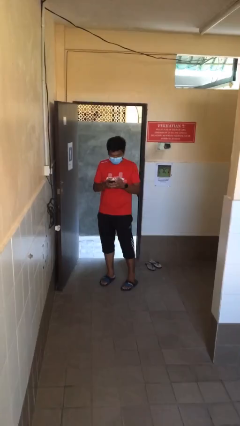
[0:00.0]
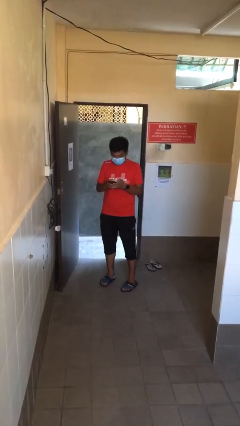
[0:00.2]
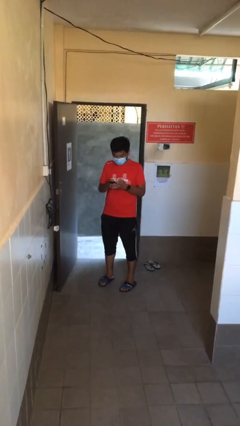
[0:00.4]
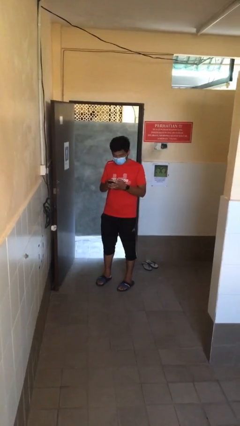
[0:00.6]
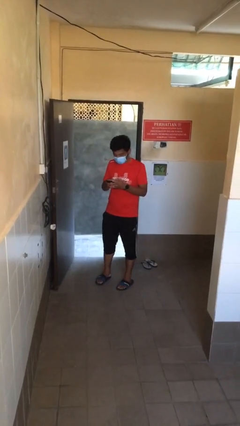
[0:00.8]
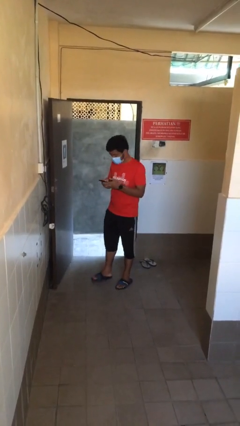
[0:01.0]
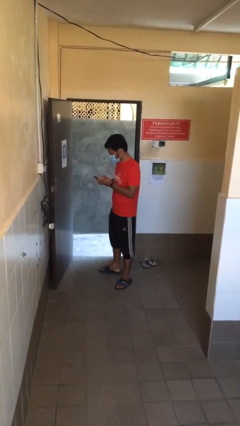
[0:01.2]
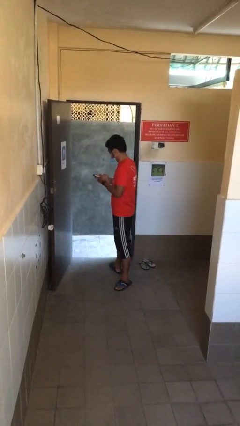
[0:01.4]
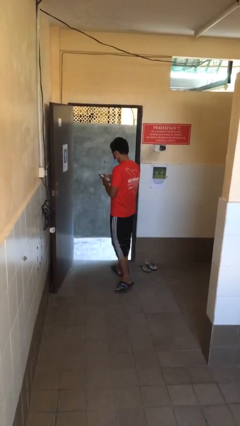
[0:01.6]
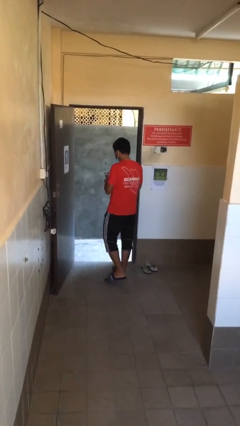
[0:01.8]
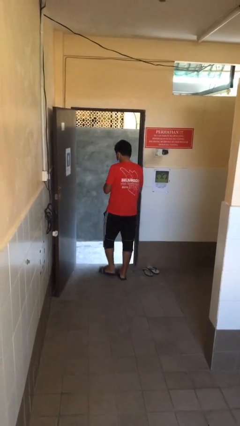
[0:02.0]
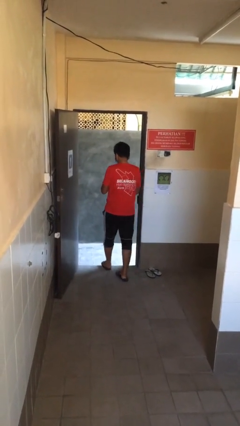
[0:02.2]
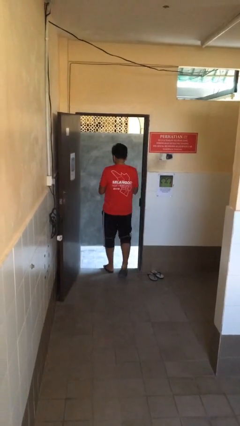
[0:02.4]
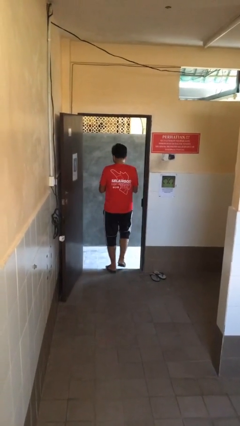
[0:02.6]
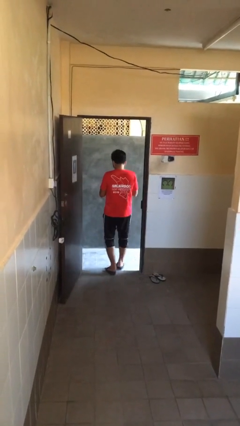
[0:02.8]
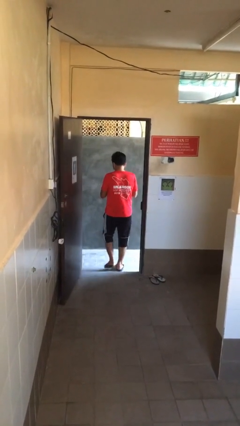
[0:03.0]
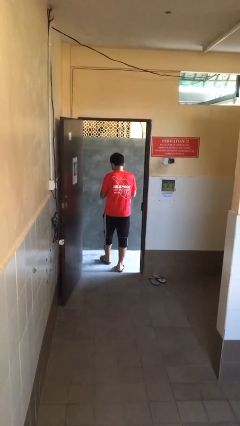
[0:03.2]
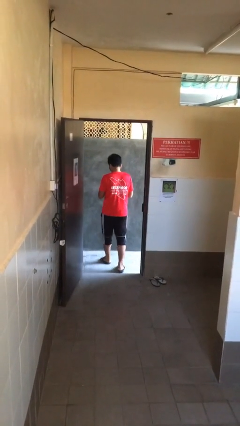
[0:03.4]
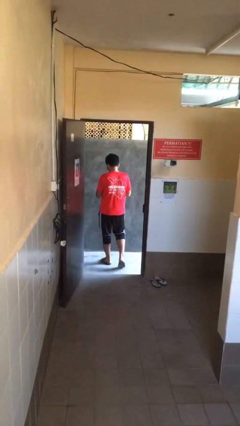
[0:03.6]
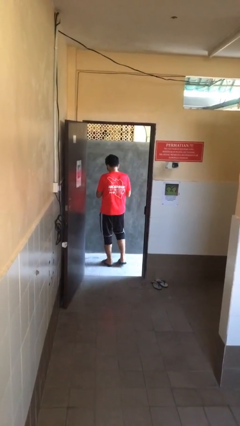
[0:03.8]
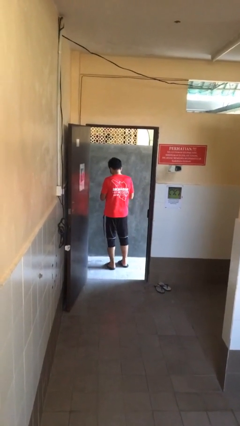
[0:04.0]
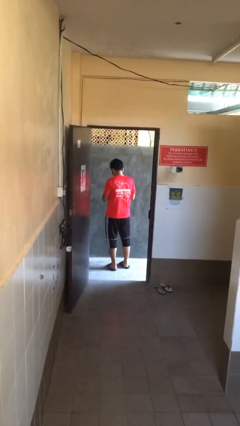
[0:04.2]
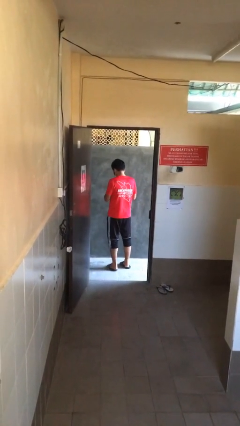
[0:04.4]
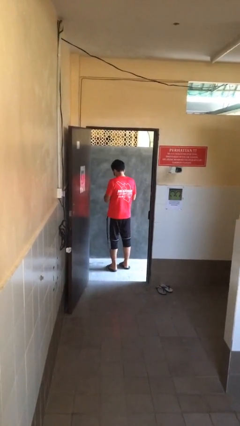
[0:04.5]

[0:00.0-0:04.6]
person exits scene through structure

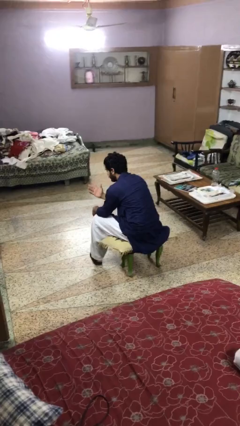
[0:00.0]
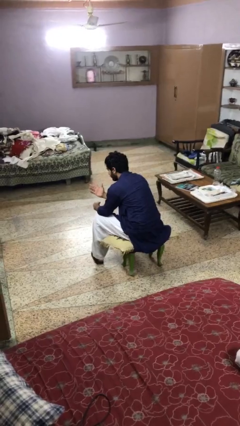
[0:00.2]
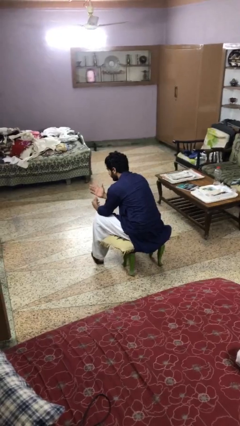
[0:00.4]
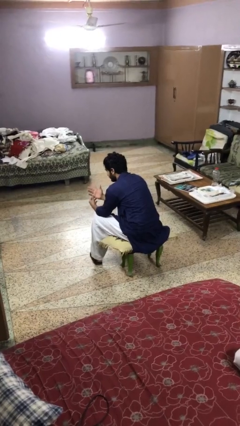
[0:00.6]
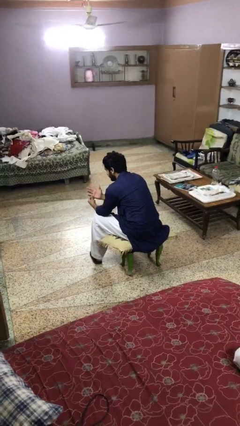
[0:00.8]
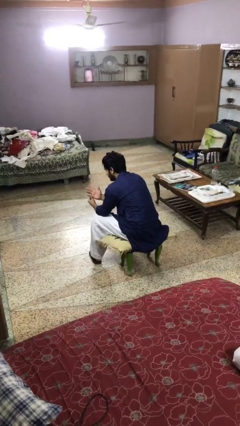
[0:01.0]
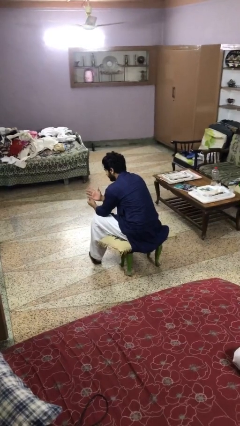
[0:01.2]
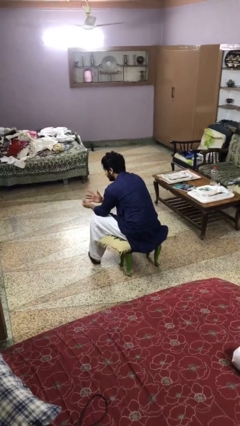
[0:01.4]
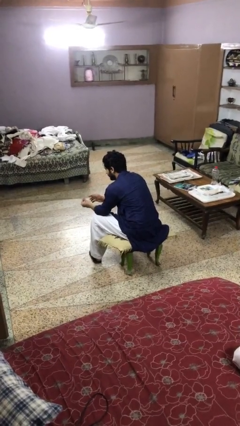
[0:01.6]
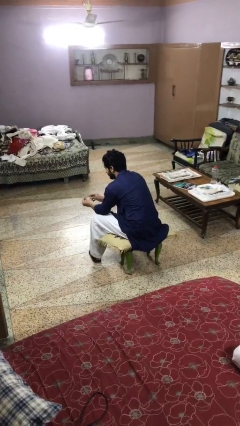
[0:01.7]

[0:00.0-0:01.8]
person takes off ring

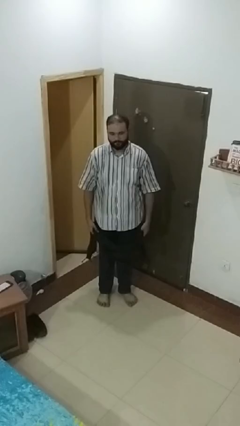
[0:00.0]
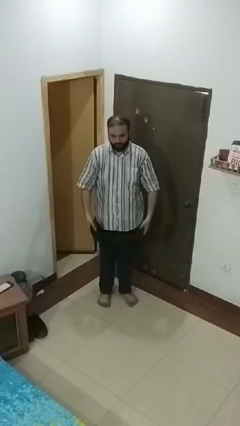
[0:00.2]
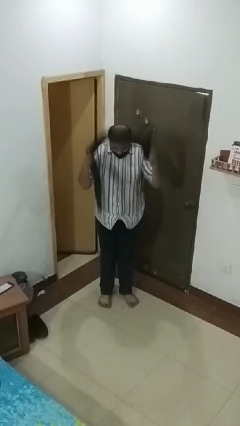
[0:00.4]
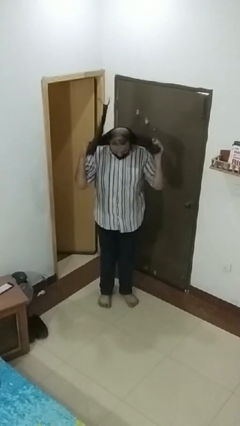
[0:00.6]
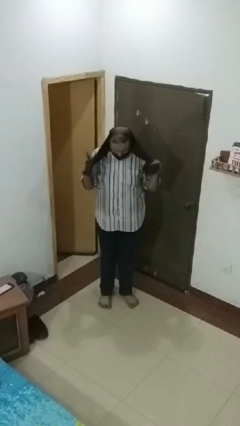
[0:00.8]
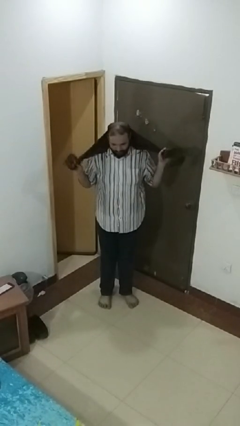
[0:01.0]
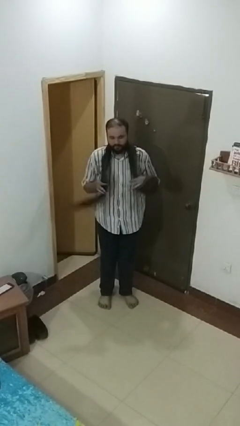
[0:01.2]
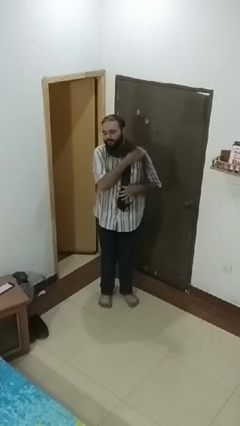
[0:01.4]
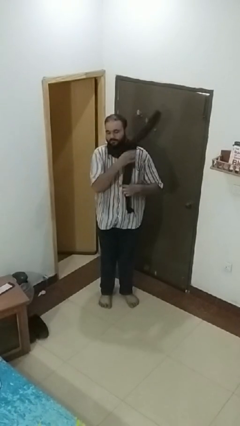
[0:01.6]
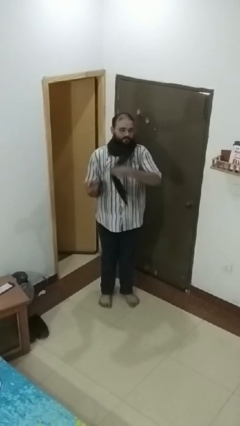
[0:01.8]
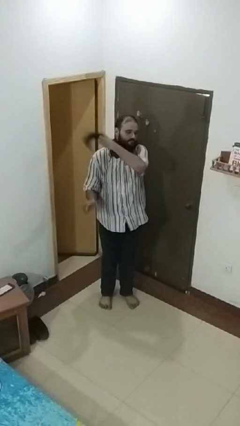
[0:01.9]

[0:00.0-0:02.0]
person puts on scarf

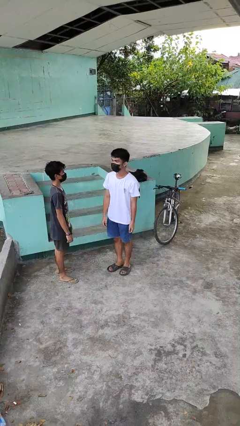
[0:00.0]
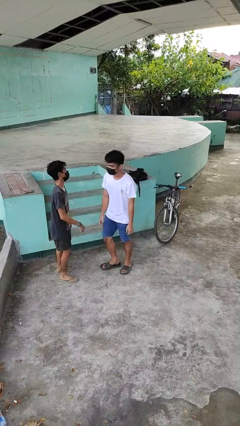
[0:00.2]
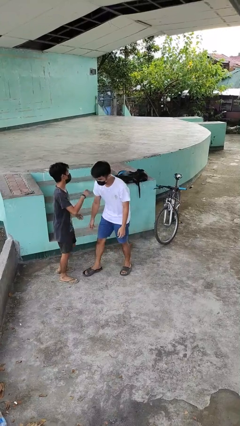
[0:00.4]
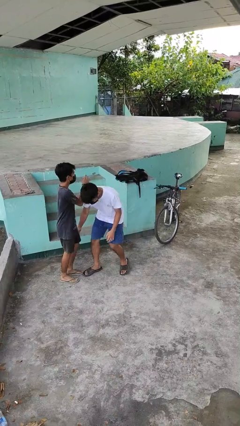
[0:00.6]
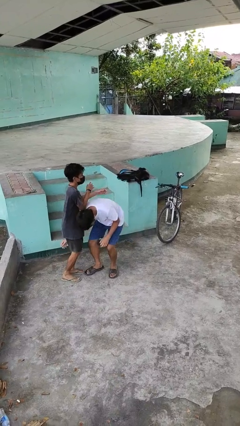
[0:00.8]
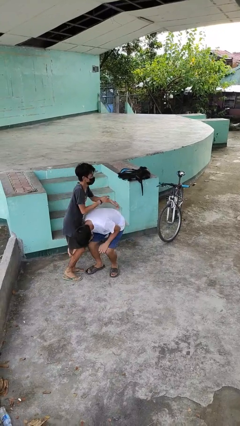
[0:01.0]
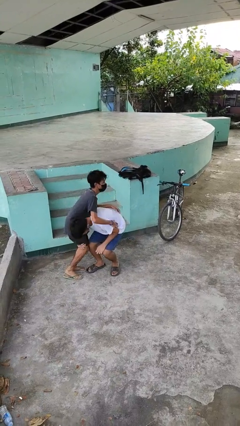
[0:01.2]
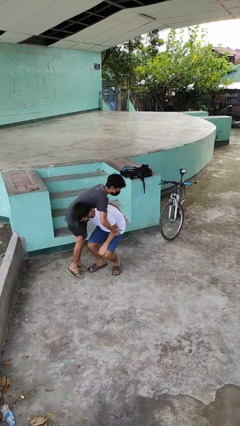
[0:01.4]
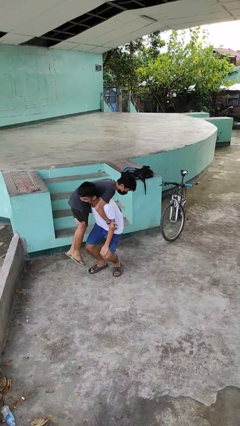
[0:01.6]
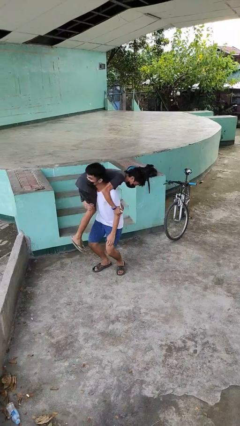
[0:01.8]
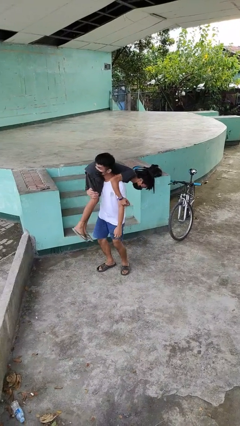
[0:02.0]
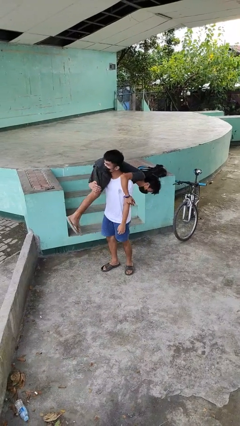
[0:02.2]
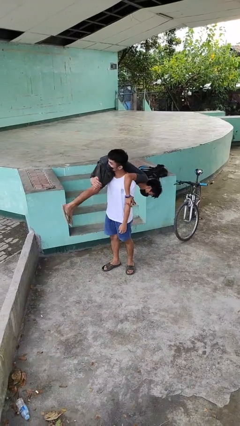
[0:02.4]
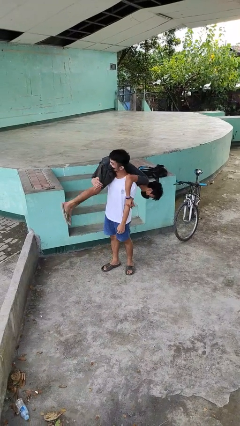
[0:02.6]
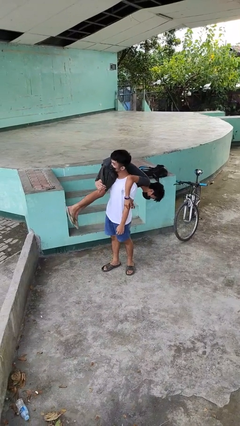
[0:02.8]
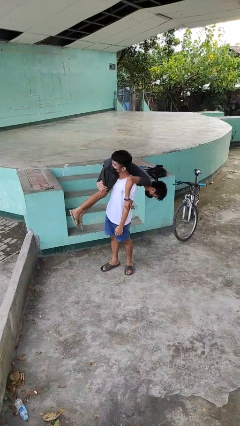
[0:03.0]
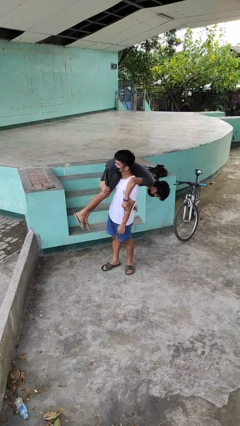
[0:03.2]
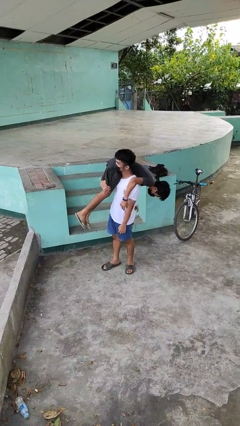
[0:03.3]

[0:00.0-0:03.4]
person carries person over shoulder

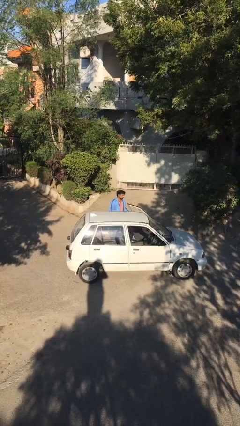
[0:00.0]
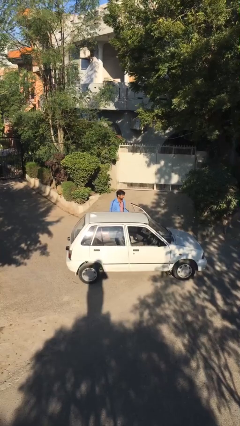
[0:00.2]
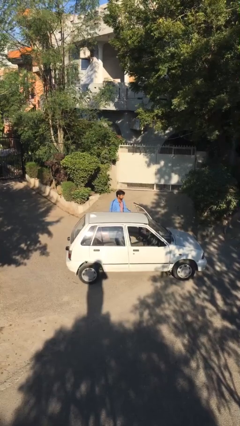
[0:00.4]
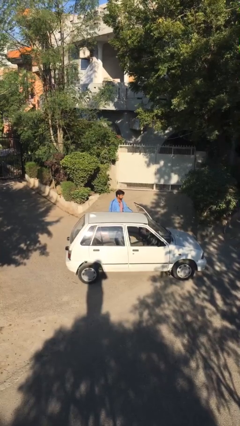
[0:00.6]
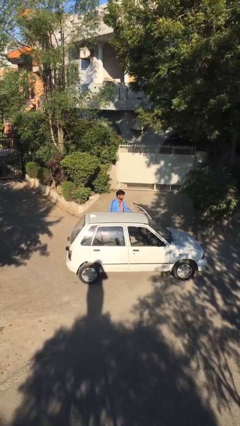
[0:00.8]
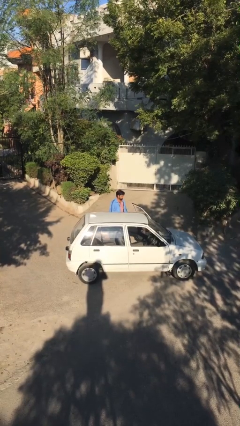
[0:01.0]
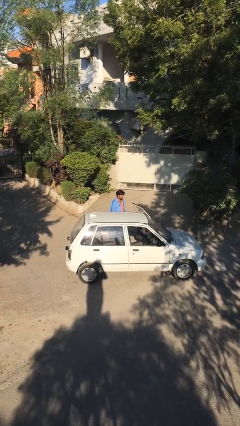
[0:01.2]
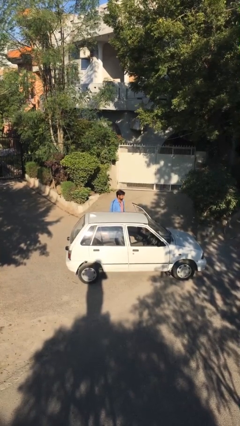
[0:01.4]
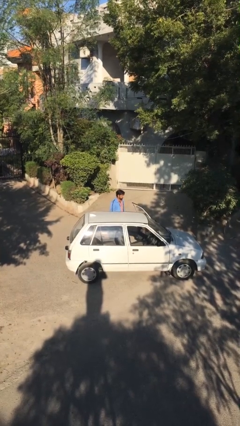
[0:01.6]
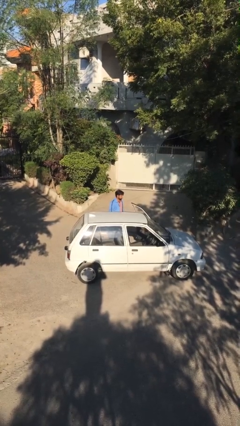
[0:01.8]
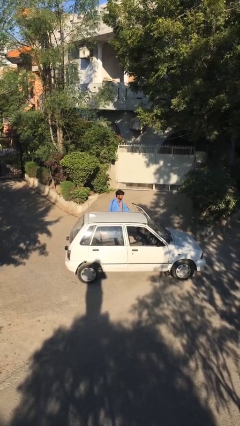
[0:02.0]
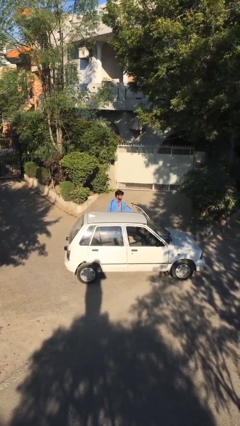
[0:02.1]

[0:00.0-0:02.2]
person opens car door

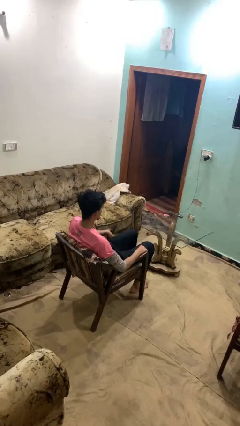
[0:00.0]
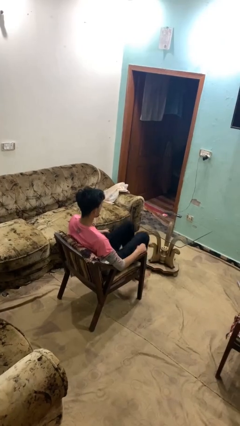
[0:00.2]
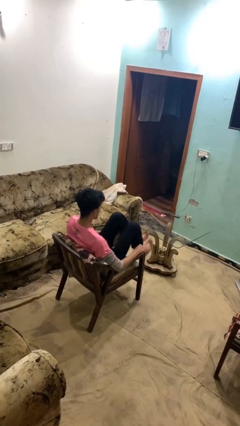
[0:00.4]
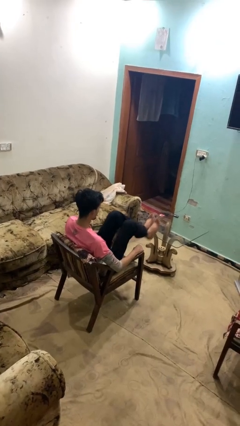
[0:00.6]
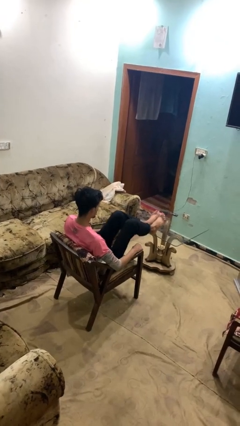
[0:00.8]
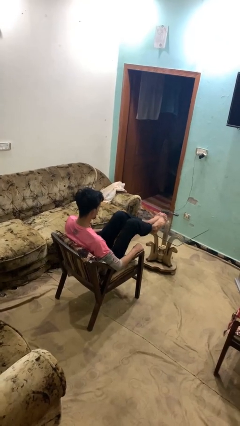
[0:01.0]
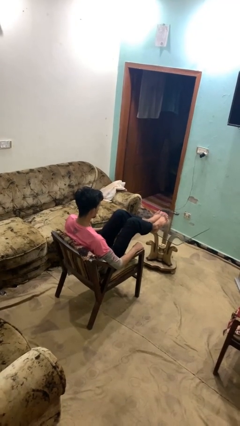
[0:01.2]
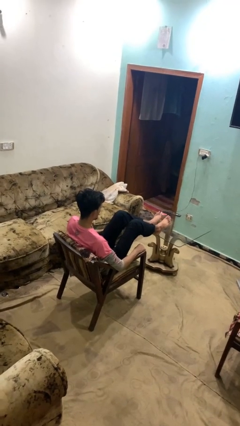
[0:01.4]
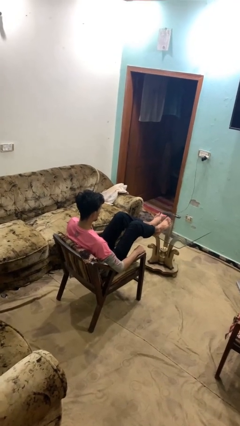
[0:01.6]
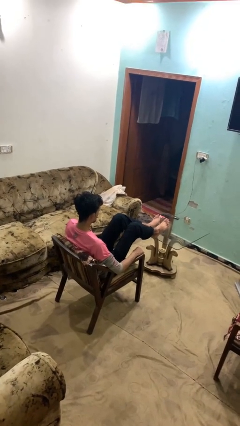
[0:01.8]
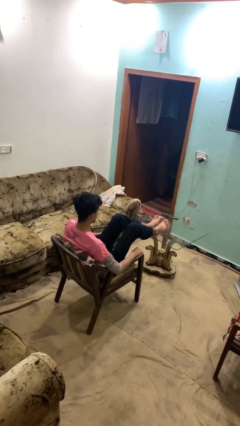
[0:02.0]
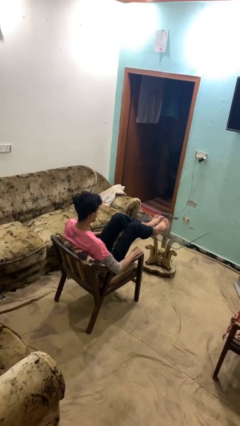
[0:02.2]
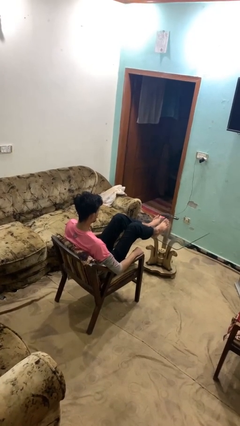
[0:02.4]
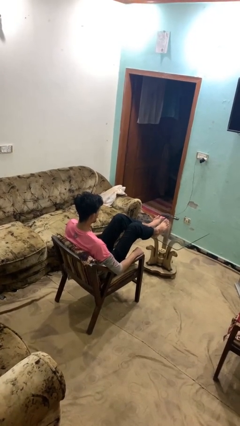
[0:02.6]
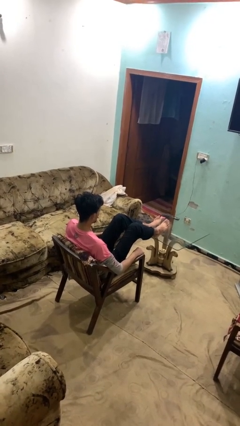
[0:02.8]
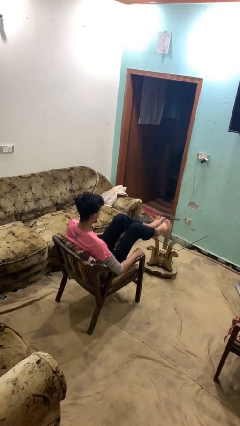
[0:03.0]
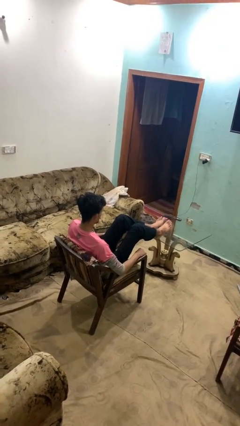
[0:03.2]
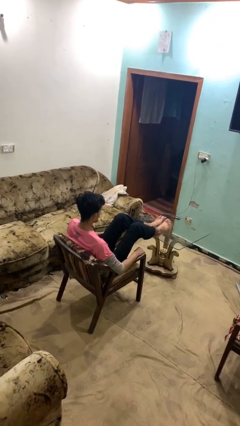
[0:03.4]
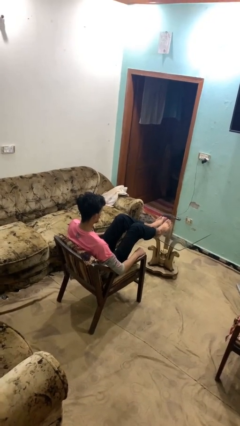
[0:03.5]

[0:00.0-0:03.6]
person puts feet up
